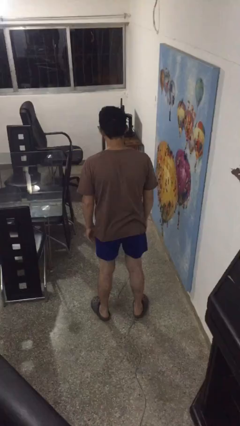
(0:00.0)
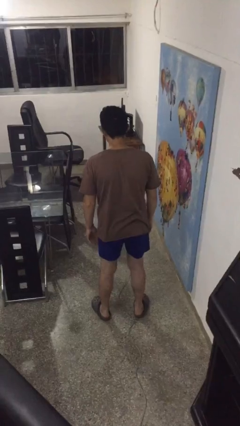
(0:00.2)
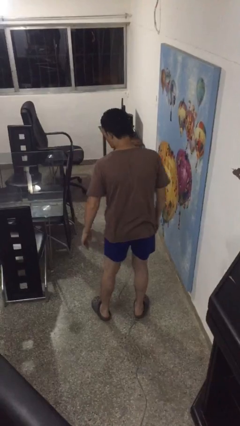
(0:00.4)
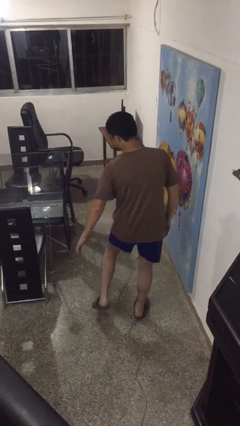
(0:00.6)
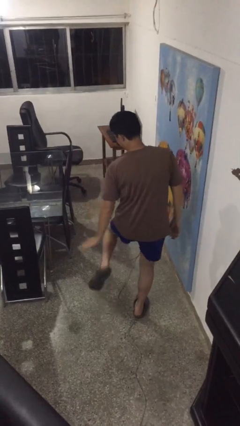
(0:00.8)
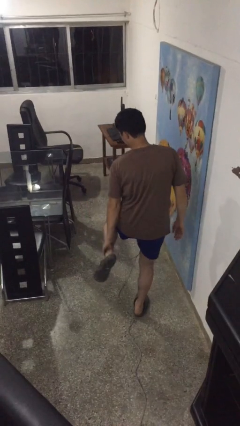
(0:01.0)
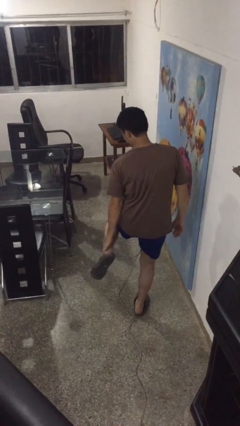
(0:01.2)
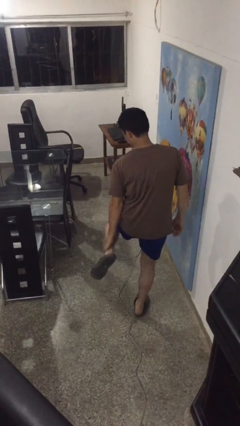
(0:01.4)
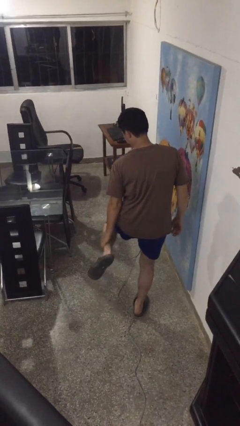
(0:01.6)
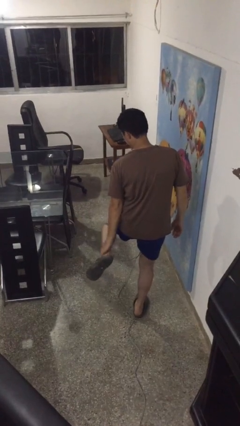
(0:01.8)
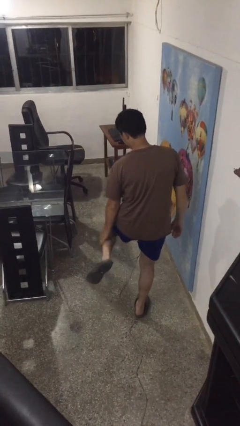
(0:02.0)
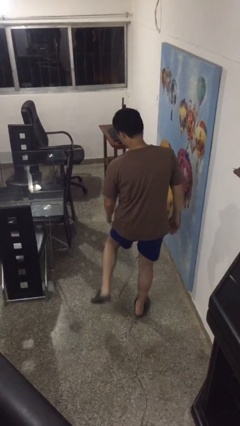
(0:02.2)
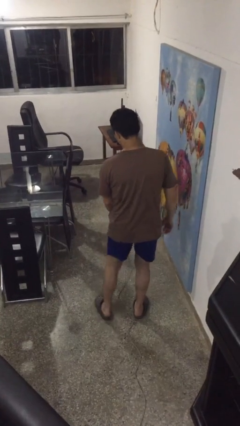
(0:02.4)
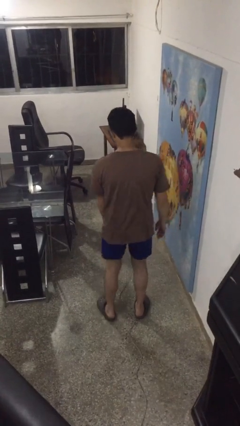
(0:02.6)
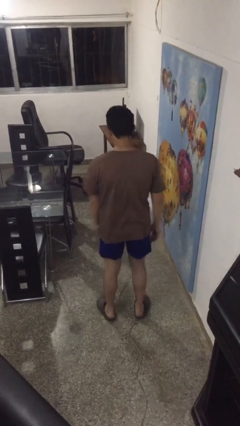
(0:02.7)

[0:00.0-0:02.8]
person swats bug

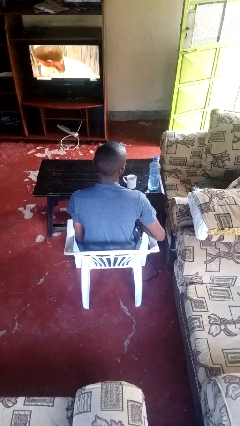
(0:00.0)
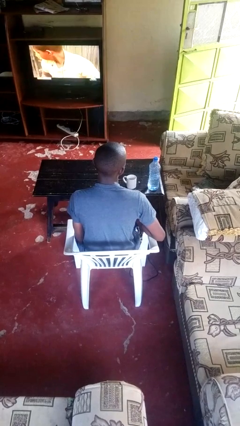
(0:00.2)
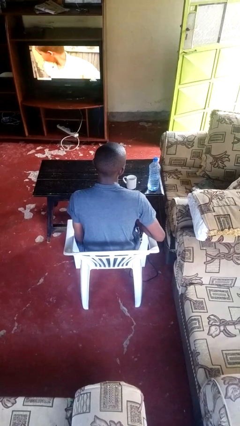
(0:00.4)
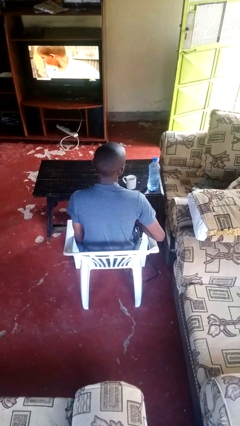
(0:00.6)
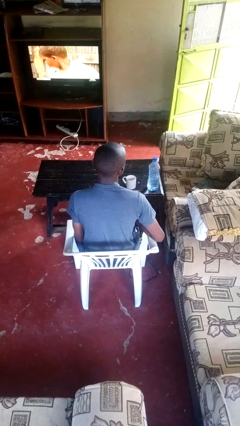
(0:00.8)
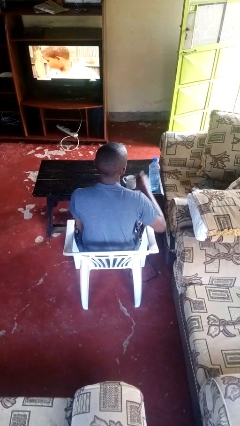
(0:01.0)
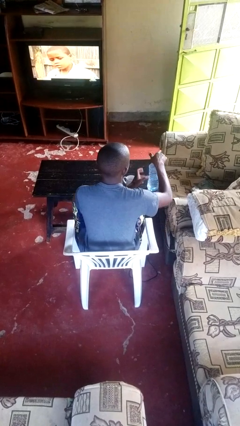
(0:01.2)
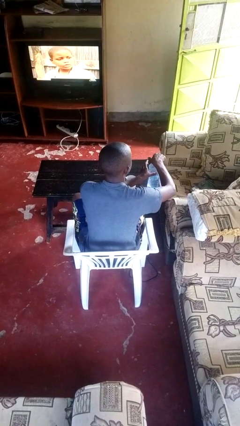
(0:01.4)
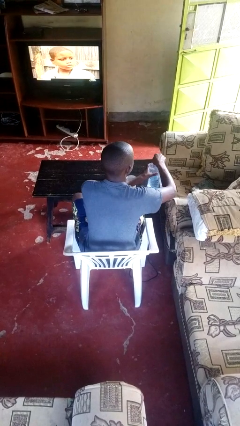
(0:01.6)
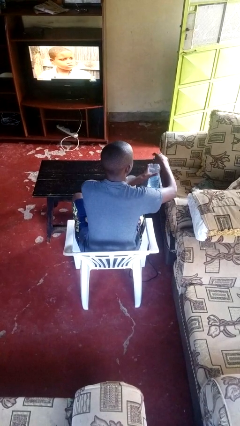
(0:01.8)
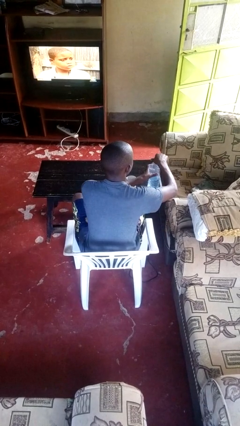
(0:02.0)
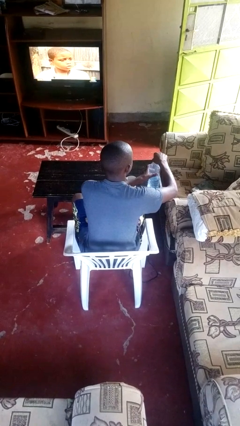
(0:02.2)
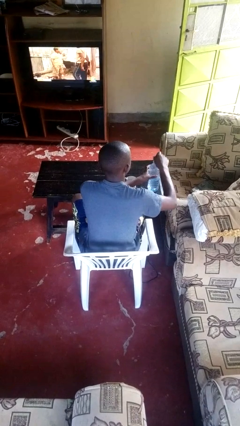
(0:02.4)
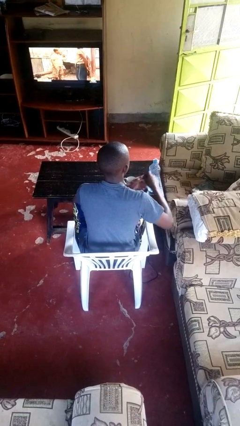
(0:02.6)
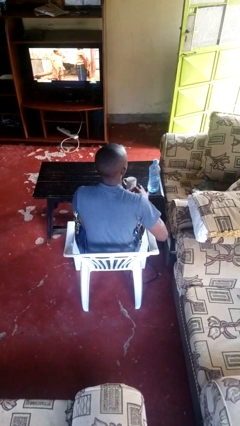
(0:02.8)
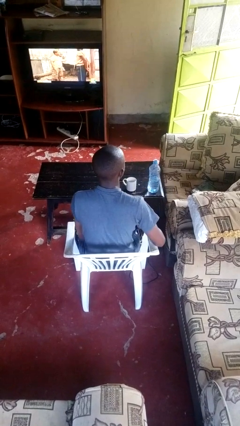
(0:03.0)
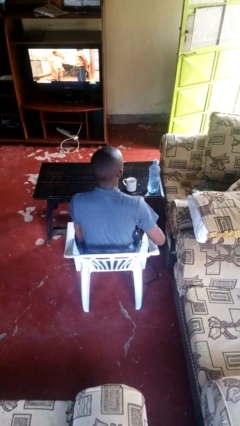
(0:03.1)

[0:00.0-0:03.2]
person unscrews lid from bottle

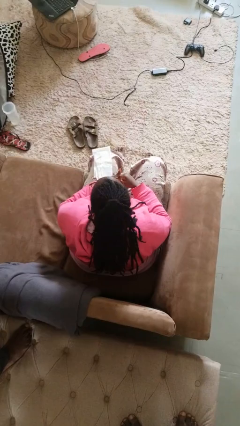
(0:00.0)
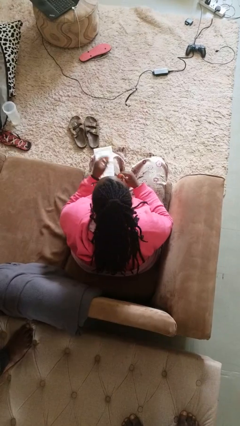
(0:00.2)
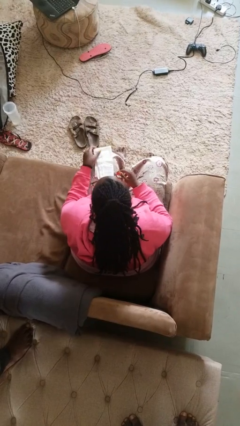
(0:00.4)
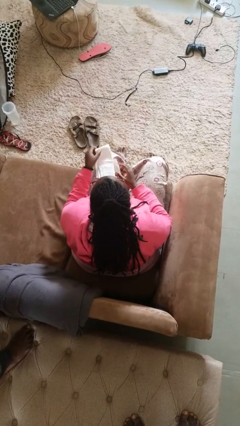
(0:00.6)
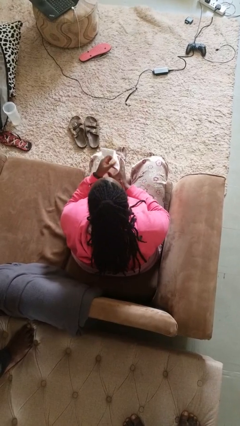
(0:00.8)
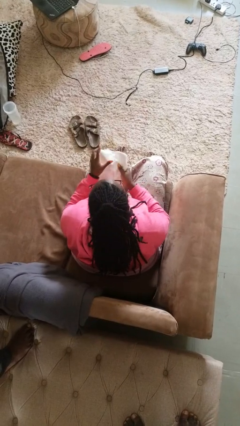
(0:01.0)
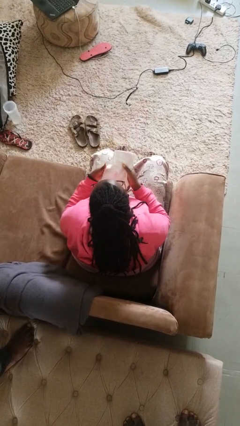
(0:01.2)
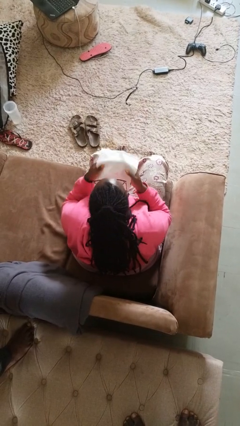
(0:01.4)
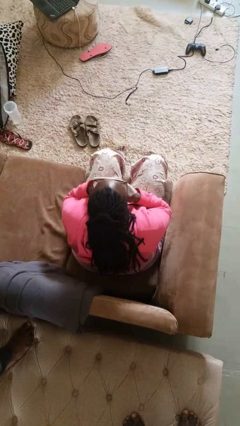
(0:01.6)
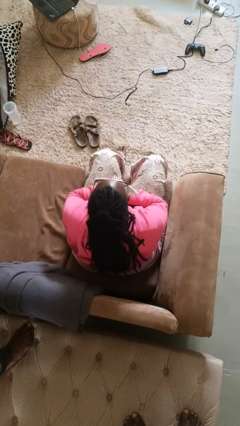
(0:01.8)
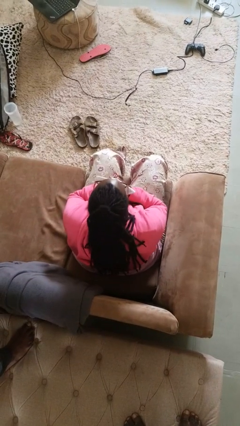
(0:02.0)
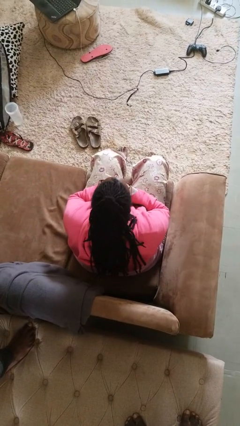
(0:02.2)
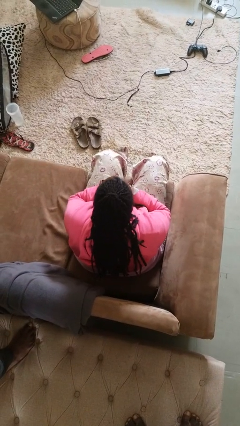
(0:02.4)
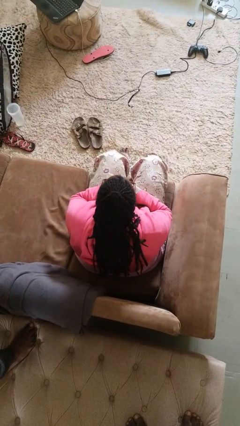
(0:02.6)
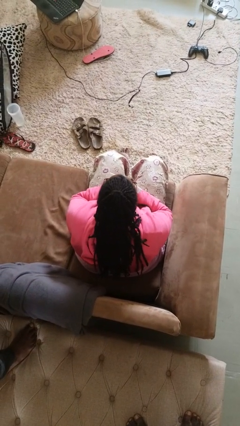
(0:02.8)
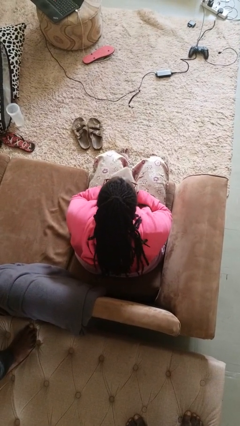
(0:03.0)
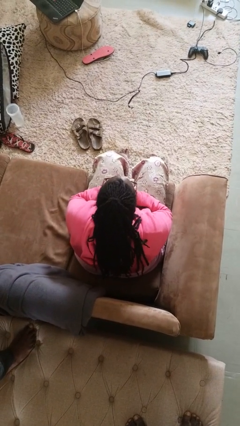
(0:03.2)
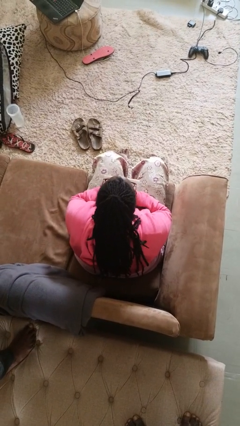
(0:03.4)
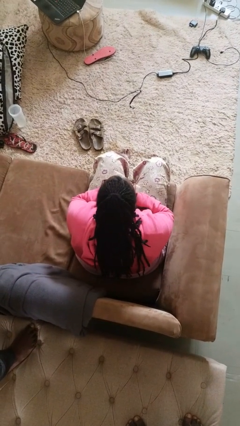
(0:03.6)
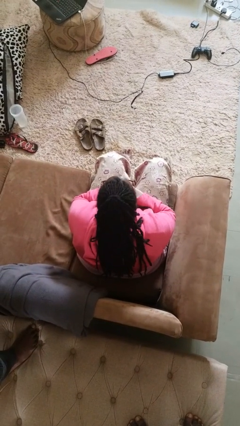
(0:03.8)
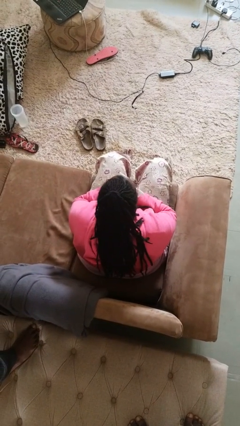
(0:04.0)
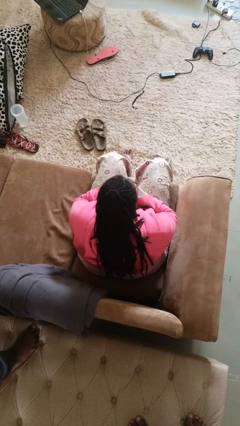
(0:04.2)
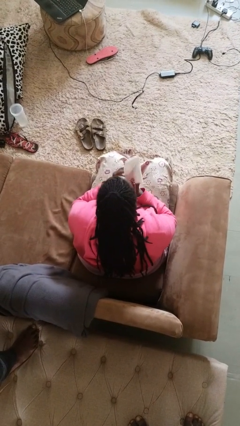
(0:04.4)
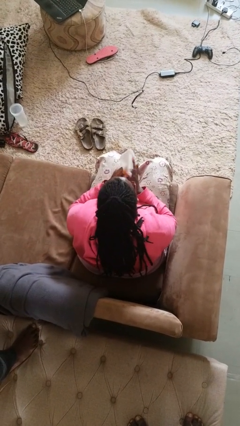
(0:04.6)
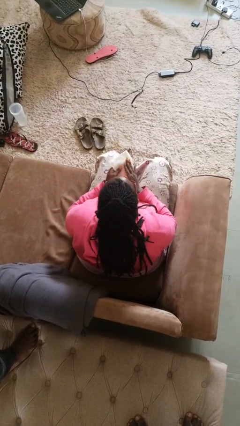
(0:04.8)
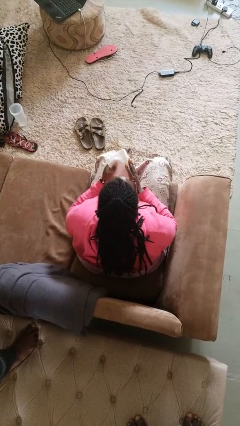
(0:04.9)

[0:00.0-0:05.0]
person blows nose

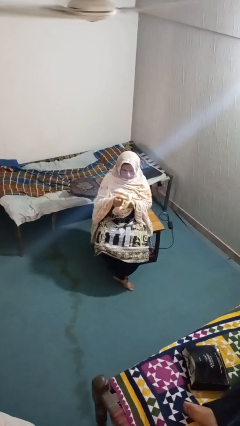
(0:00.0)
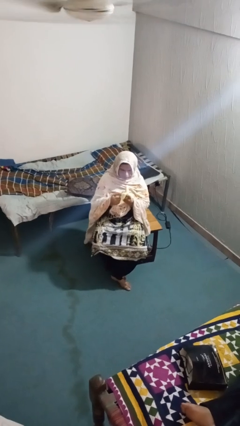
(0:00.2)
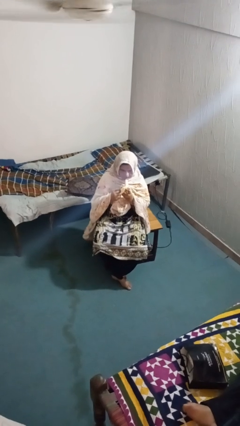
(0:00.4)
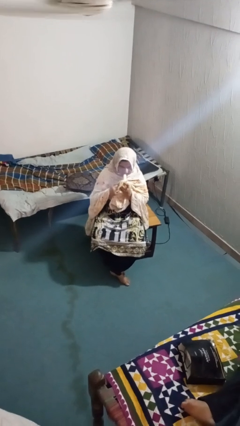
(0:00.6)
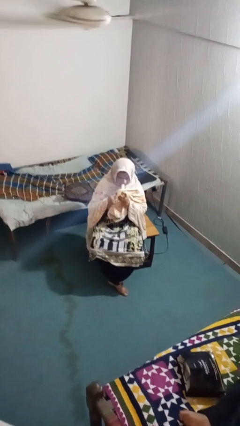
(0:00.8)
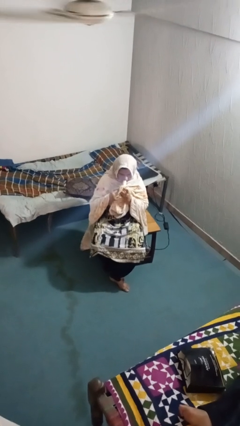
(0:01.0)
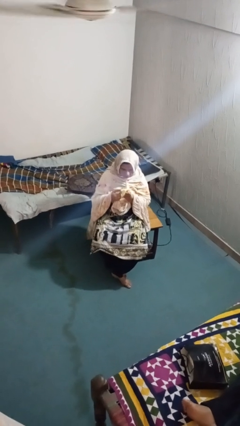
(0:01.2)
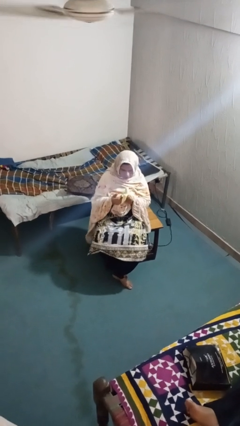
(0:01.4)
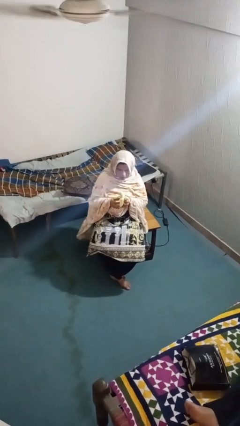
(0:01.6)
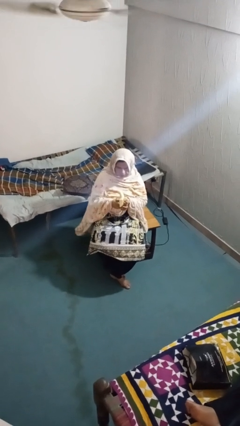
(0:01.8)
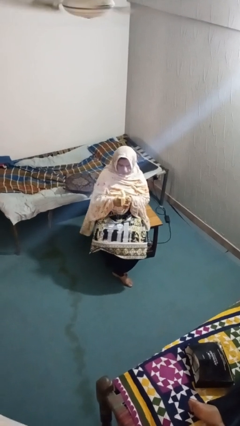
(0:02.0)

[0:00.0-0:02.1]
person eats banana

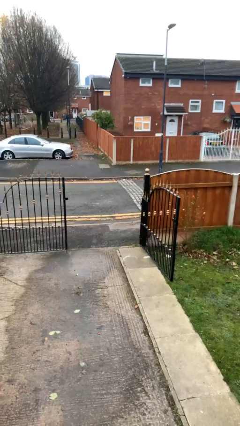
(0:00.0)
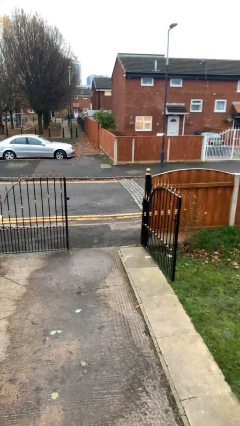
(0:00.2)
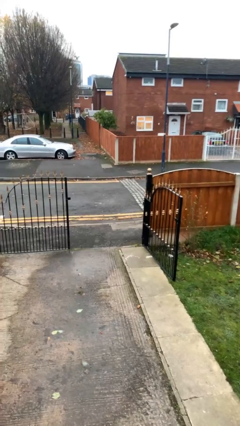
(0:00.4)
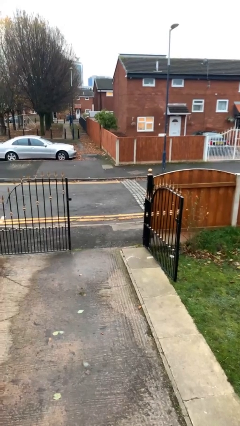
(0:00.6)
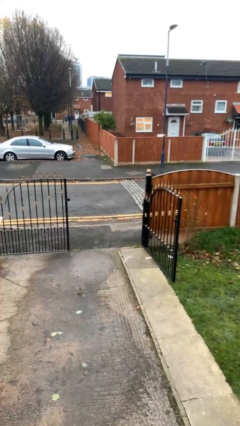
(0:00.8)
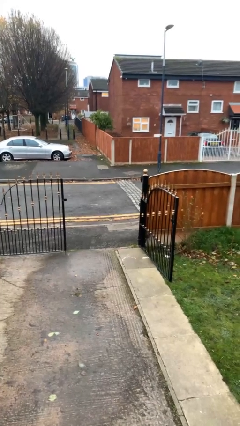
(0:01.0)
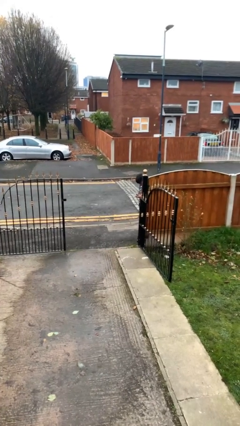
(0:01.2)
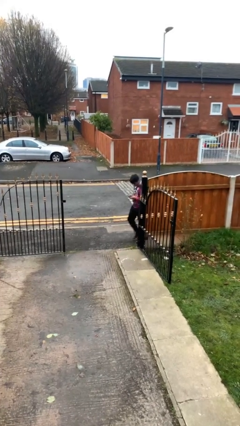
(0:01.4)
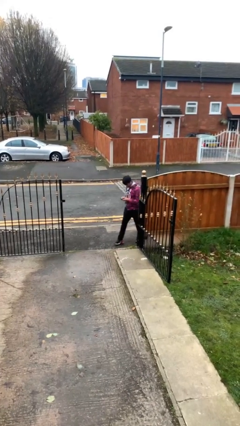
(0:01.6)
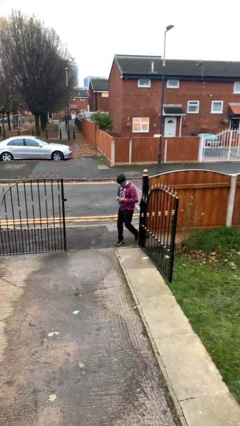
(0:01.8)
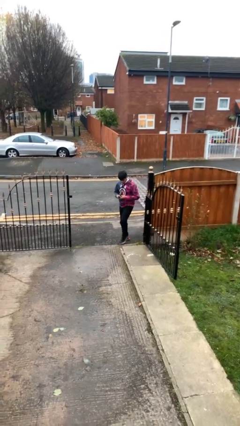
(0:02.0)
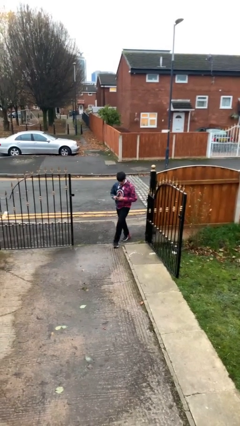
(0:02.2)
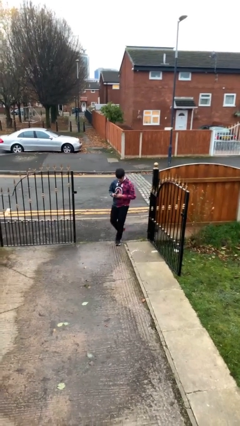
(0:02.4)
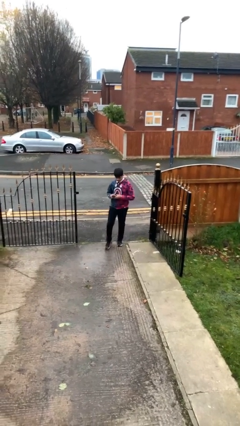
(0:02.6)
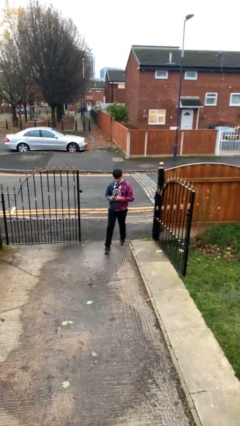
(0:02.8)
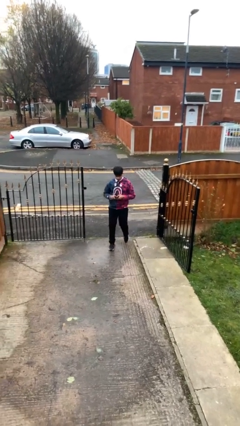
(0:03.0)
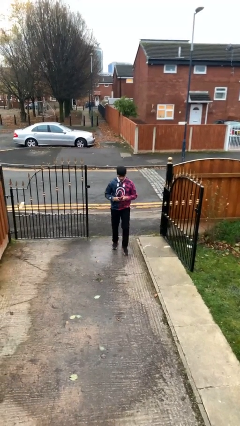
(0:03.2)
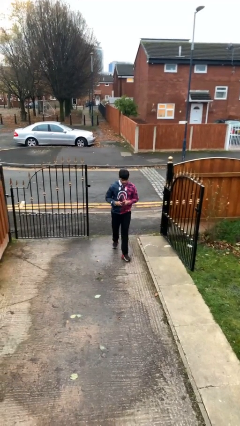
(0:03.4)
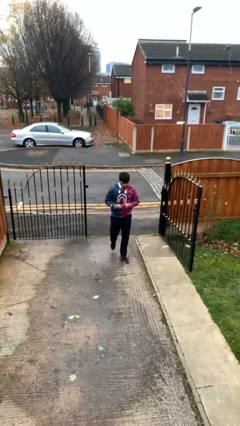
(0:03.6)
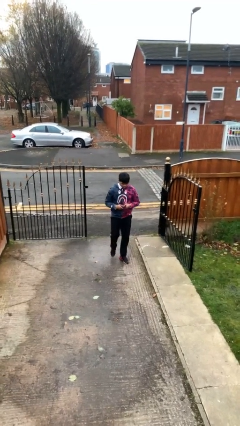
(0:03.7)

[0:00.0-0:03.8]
person enters scene through structure

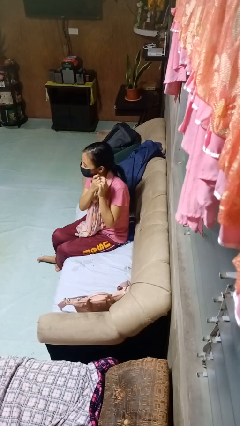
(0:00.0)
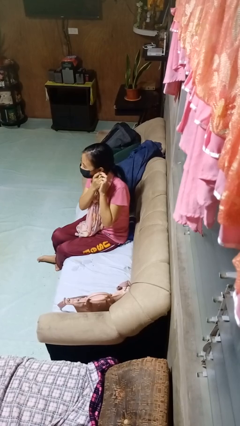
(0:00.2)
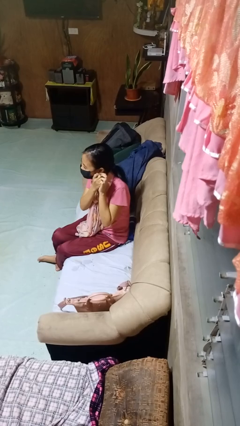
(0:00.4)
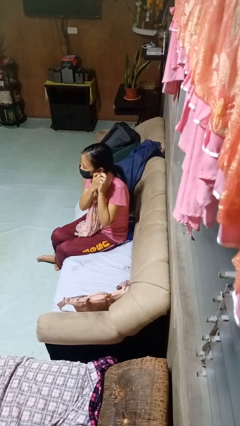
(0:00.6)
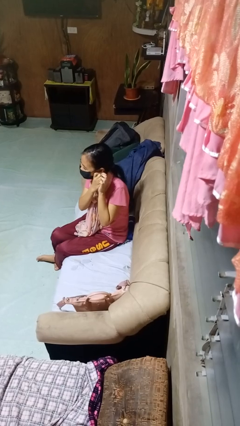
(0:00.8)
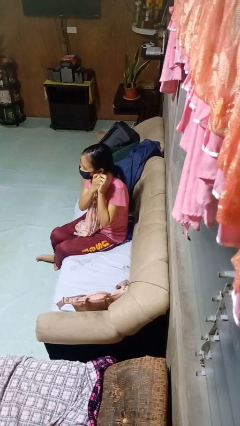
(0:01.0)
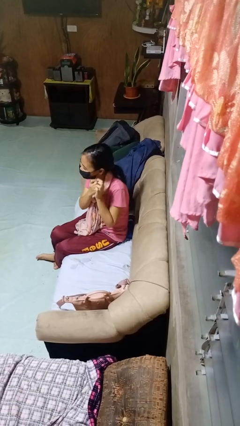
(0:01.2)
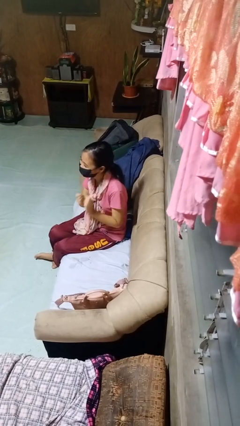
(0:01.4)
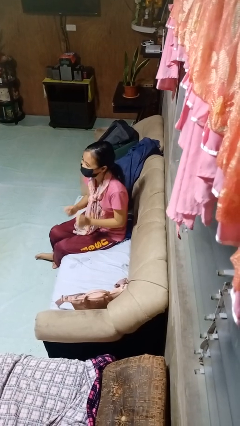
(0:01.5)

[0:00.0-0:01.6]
person takes off earrings
